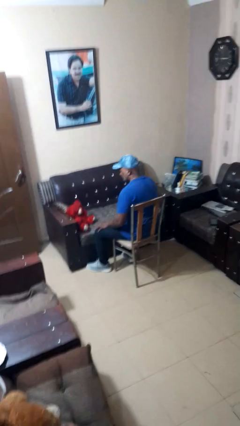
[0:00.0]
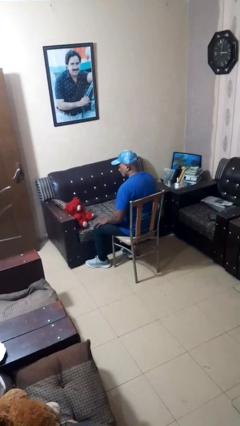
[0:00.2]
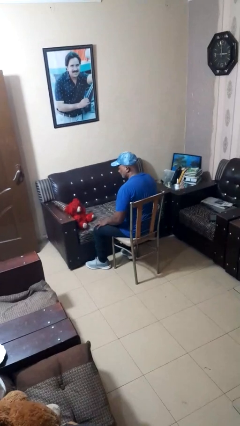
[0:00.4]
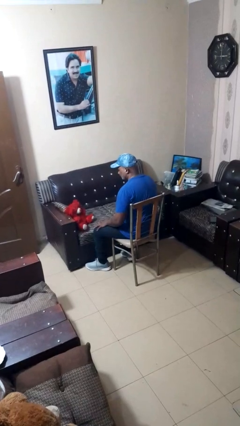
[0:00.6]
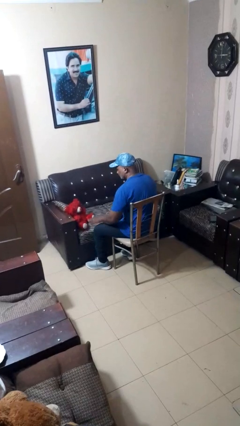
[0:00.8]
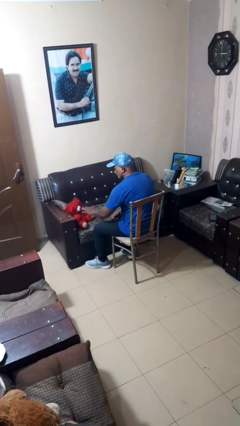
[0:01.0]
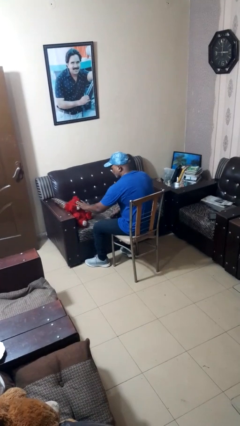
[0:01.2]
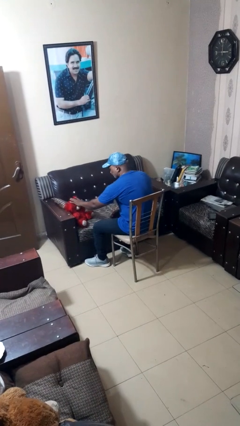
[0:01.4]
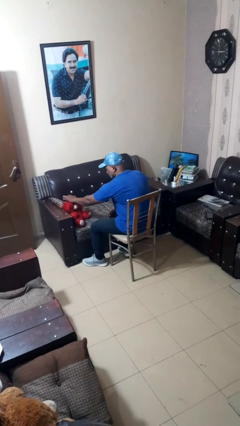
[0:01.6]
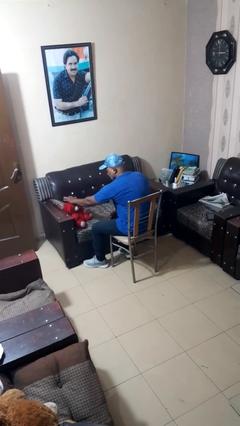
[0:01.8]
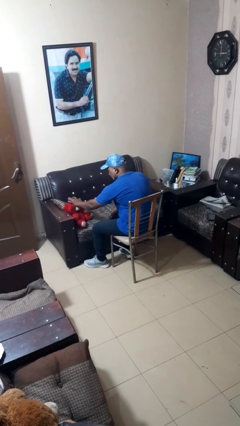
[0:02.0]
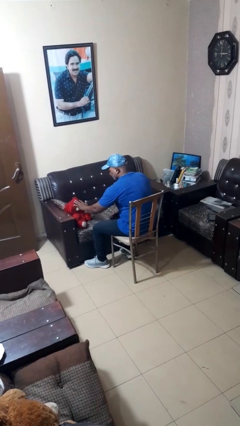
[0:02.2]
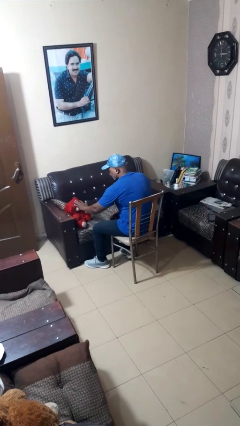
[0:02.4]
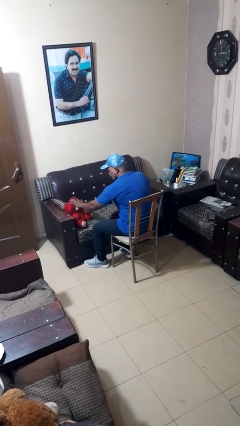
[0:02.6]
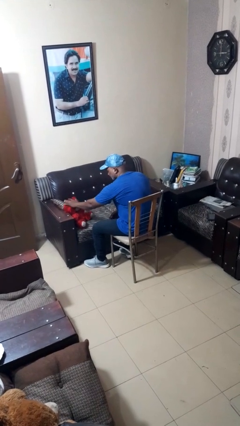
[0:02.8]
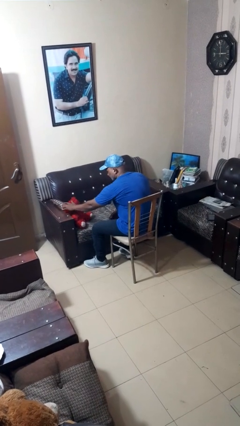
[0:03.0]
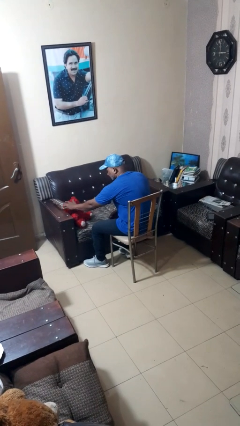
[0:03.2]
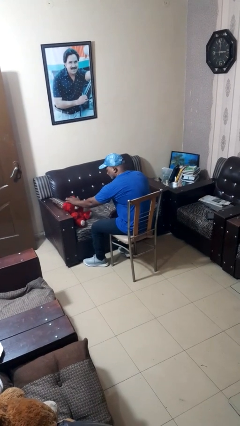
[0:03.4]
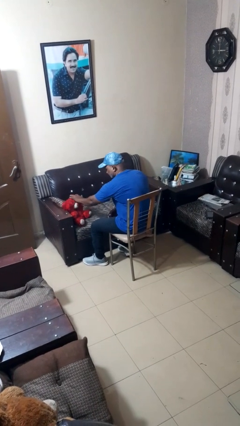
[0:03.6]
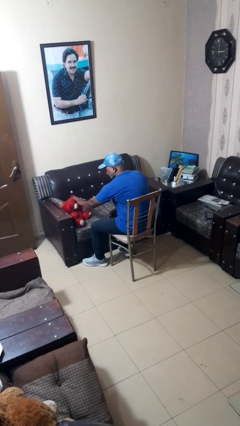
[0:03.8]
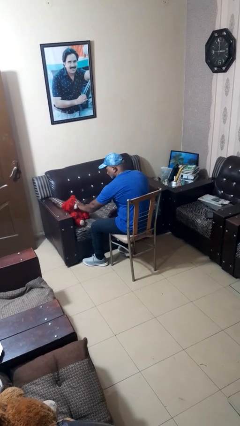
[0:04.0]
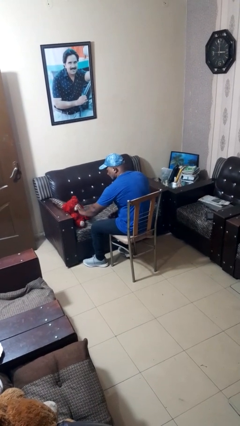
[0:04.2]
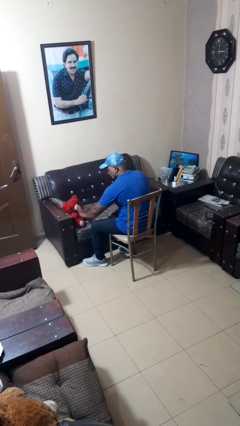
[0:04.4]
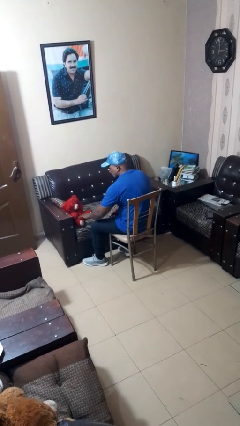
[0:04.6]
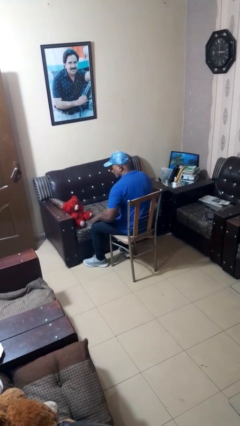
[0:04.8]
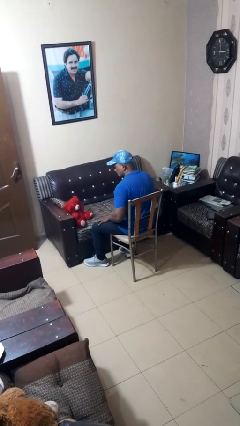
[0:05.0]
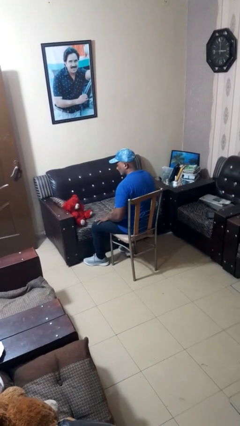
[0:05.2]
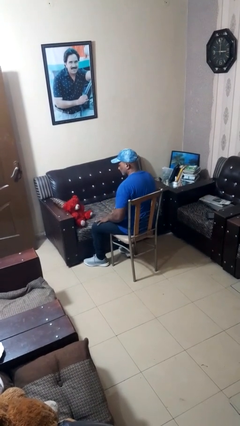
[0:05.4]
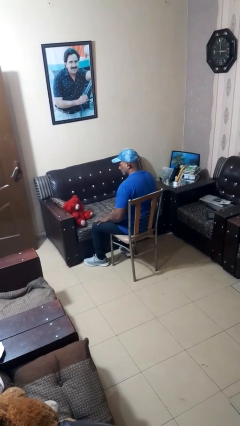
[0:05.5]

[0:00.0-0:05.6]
person waves hand over object

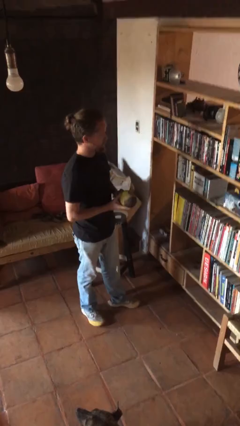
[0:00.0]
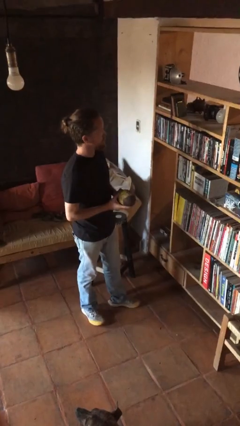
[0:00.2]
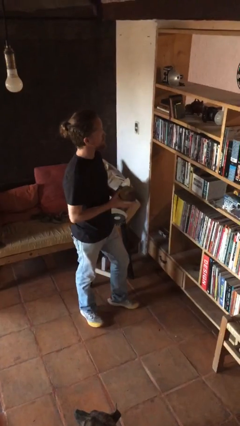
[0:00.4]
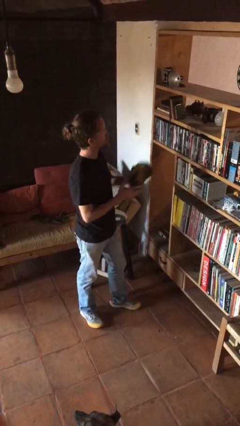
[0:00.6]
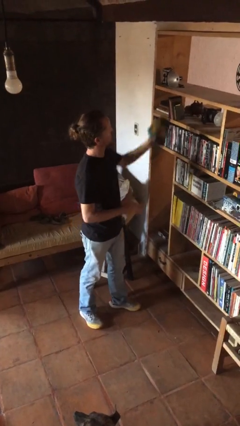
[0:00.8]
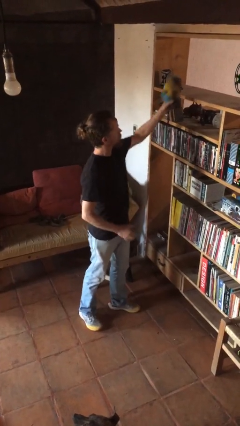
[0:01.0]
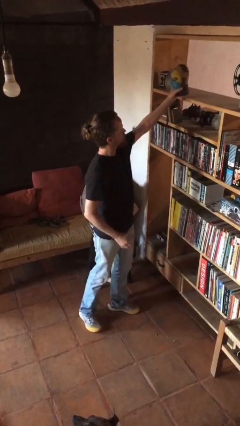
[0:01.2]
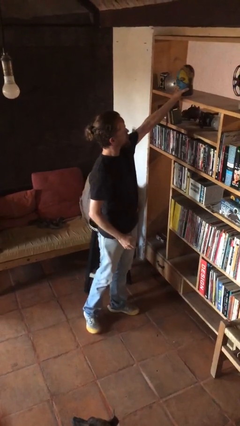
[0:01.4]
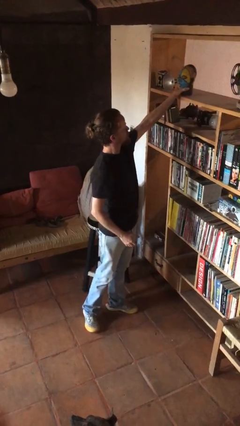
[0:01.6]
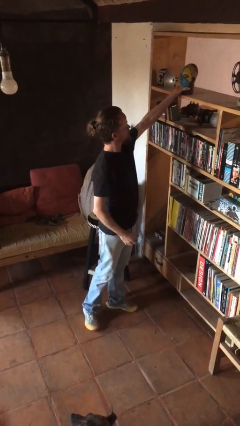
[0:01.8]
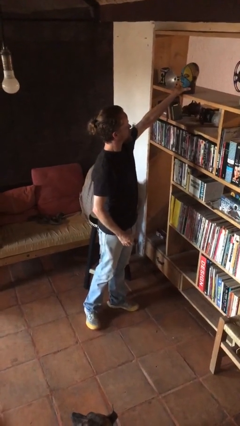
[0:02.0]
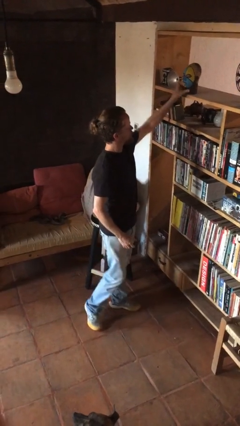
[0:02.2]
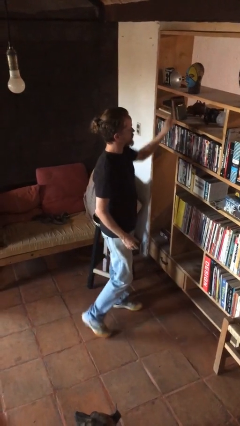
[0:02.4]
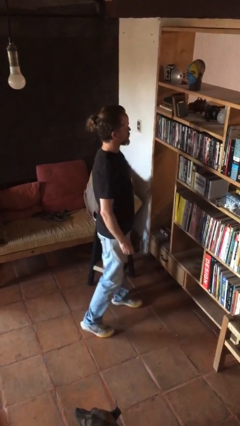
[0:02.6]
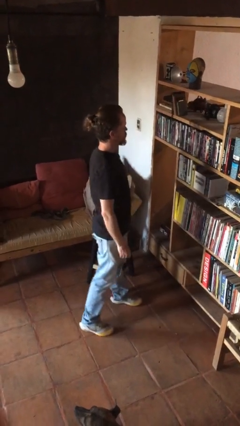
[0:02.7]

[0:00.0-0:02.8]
person puts down object on countertop

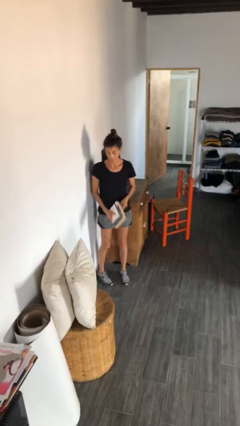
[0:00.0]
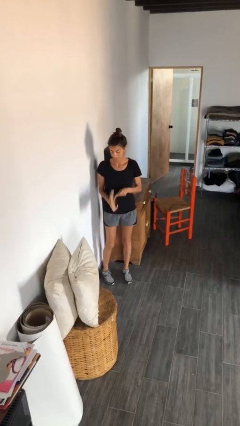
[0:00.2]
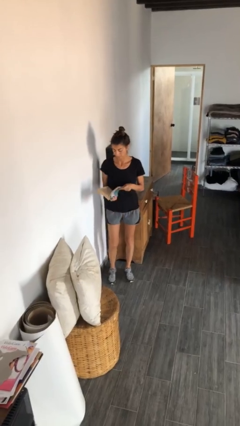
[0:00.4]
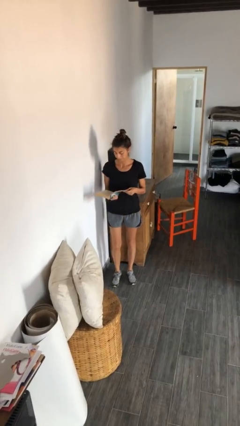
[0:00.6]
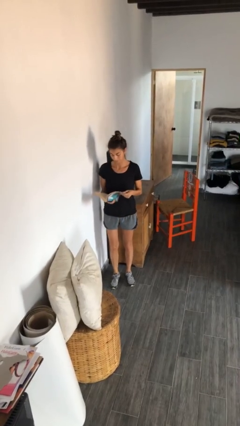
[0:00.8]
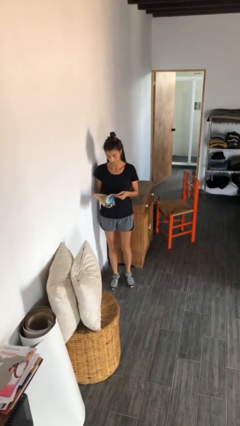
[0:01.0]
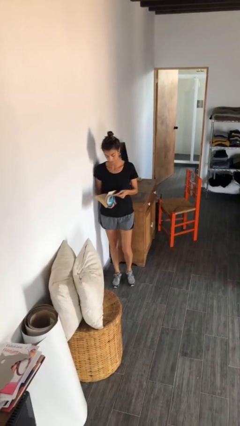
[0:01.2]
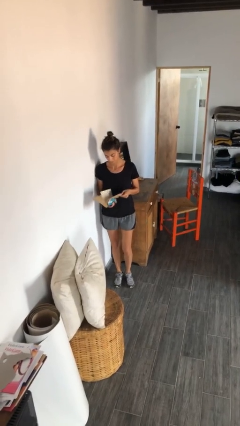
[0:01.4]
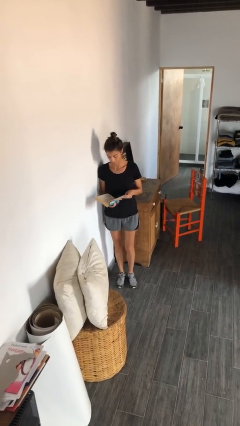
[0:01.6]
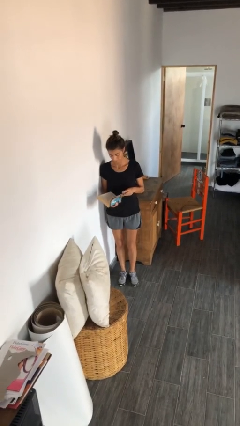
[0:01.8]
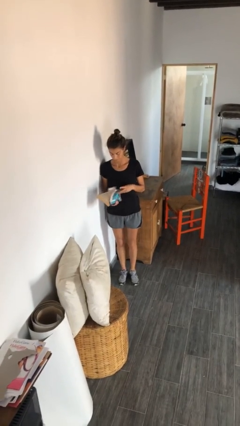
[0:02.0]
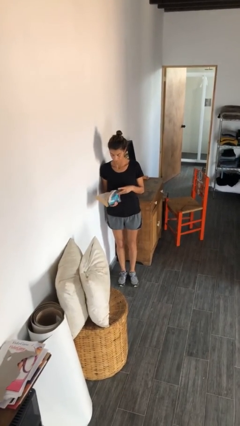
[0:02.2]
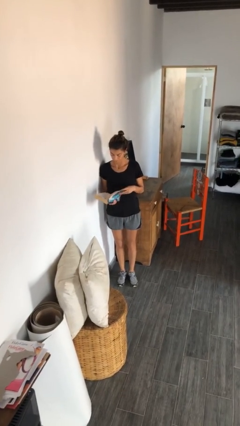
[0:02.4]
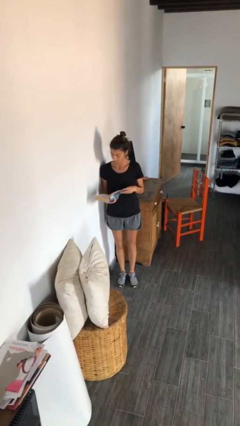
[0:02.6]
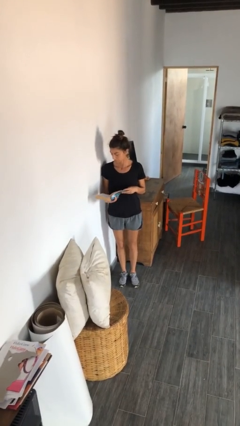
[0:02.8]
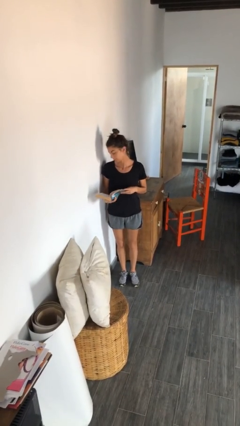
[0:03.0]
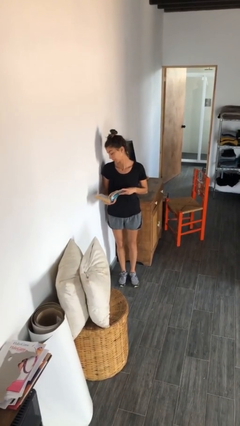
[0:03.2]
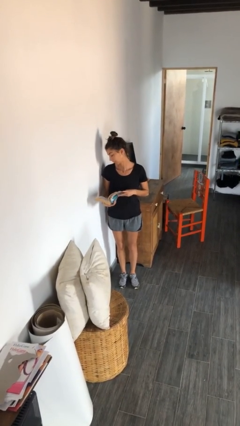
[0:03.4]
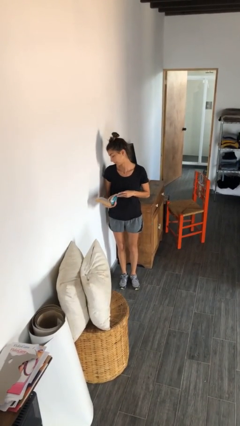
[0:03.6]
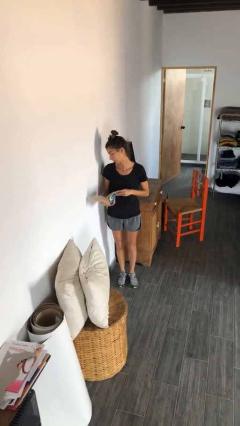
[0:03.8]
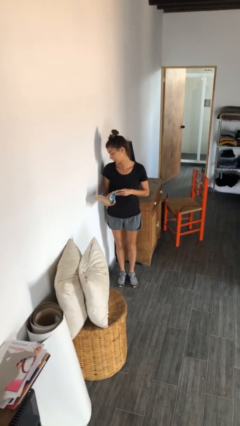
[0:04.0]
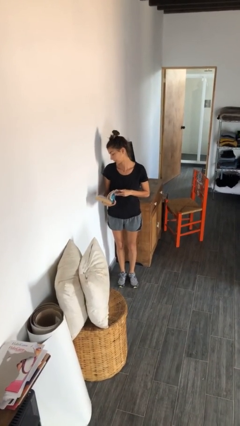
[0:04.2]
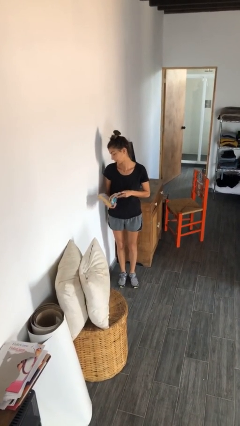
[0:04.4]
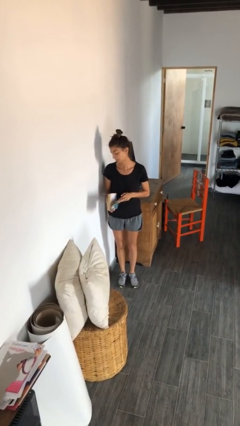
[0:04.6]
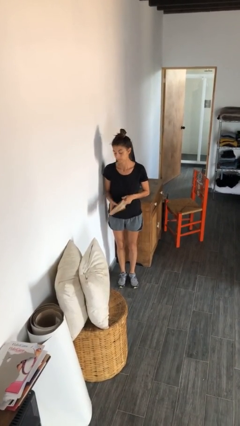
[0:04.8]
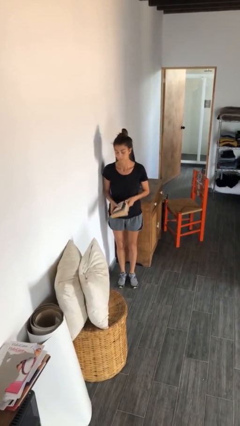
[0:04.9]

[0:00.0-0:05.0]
person reads book

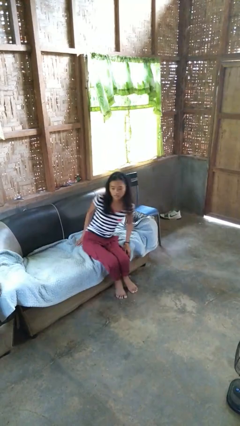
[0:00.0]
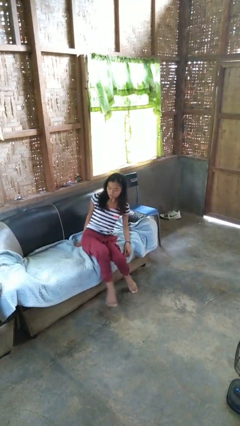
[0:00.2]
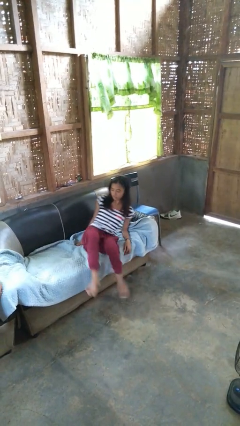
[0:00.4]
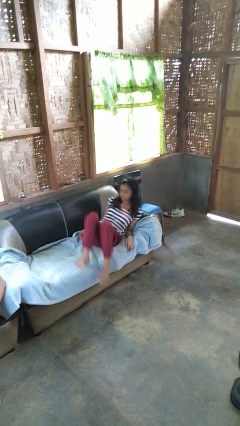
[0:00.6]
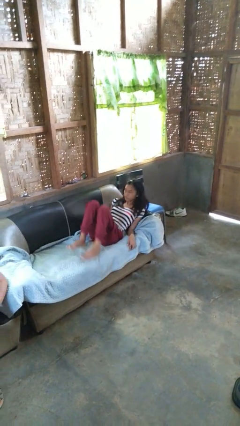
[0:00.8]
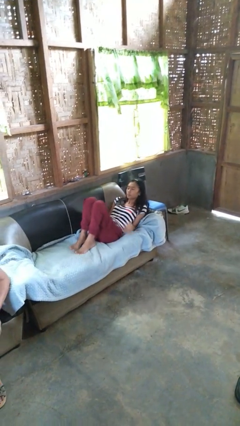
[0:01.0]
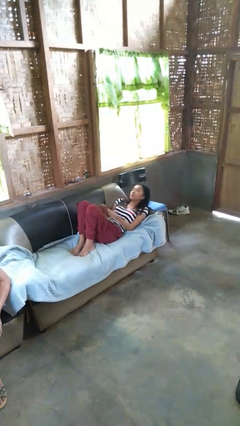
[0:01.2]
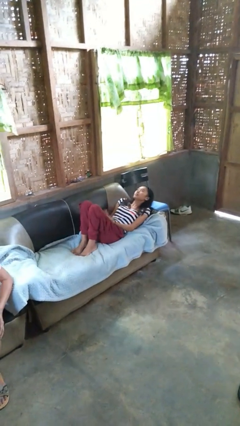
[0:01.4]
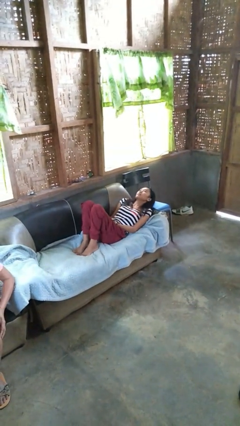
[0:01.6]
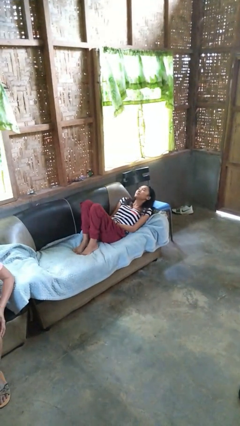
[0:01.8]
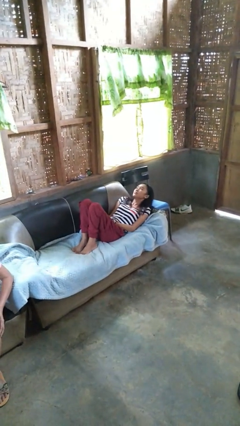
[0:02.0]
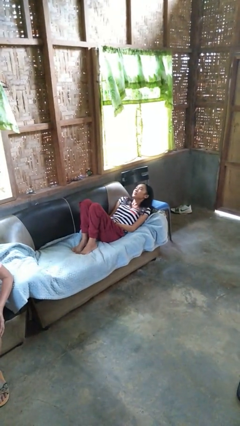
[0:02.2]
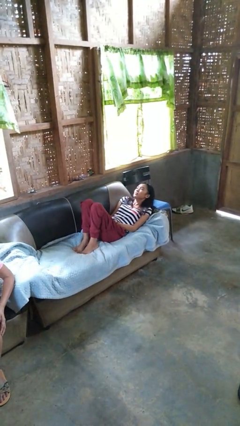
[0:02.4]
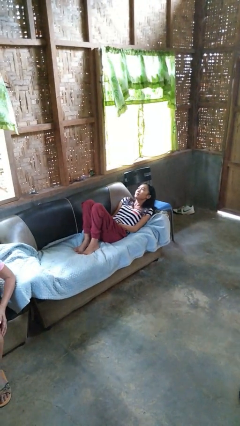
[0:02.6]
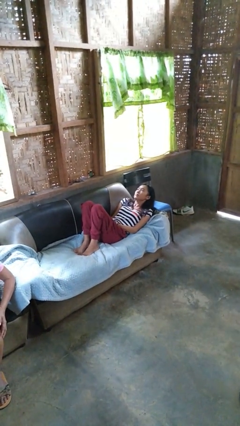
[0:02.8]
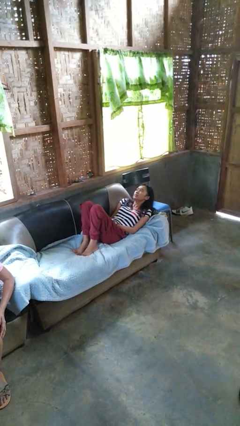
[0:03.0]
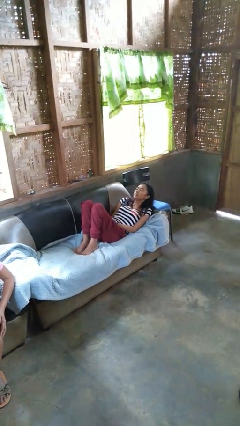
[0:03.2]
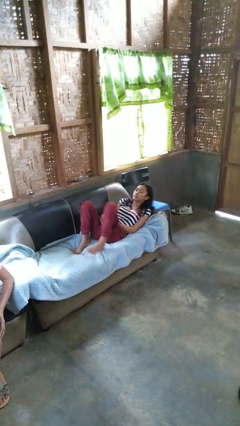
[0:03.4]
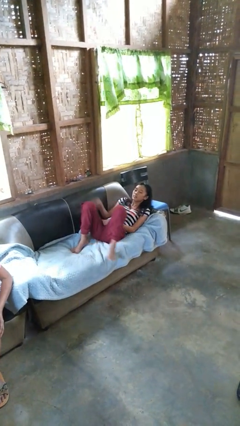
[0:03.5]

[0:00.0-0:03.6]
person lies down on couch

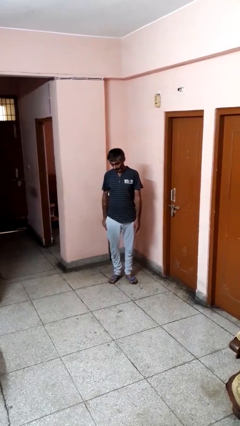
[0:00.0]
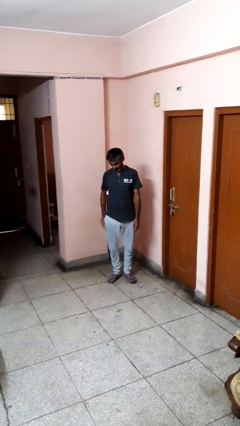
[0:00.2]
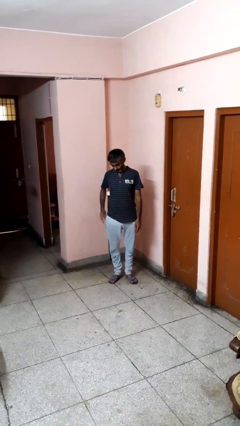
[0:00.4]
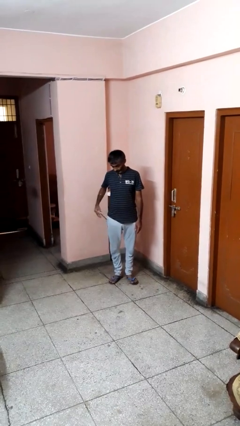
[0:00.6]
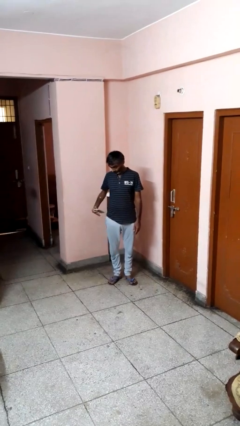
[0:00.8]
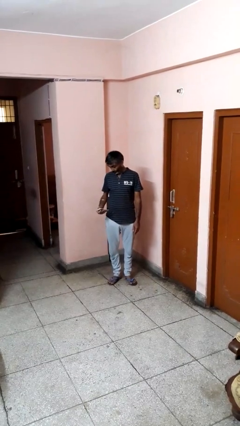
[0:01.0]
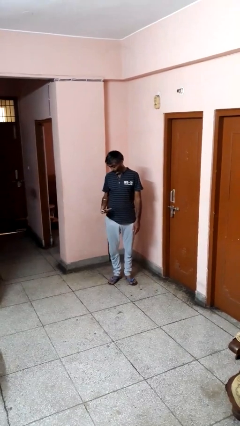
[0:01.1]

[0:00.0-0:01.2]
person takes phone from pocket
